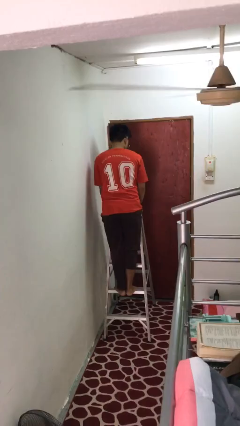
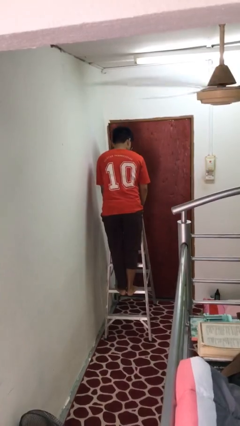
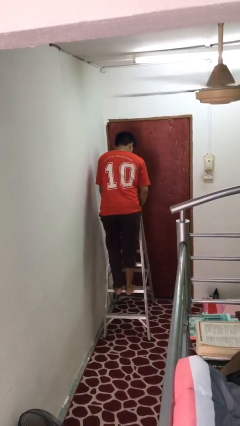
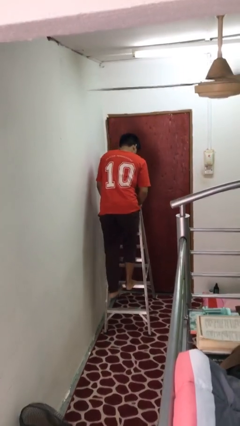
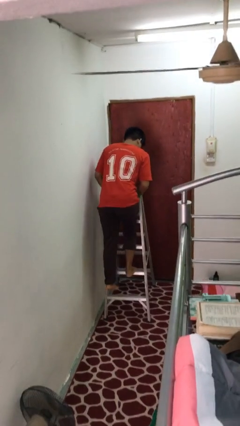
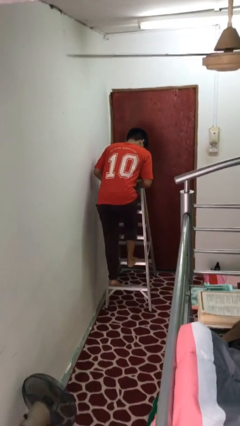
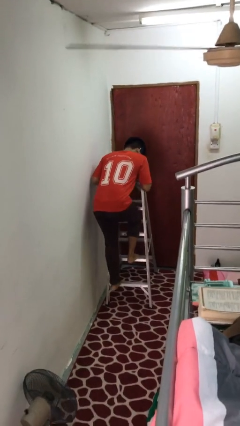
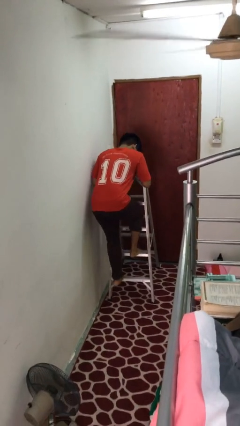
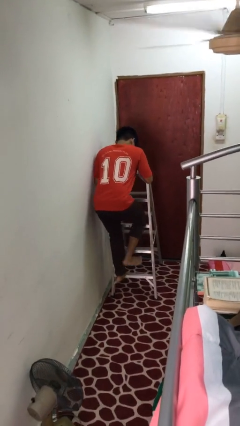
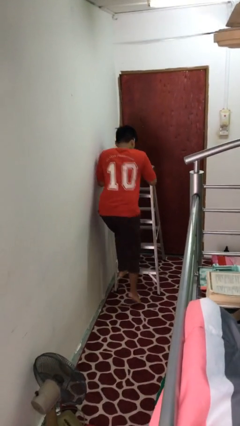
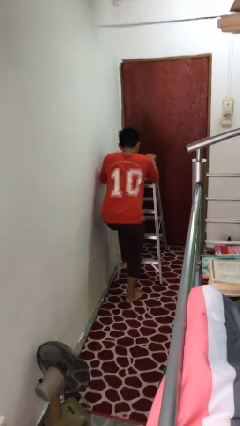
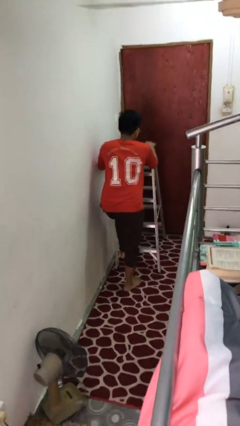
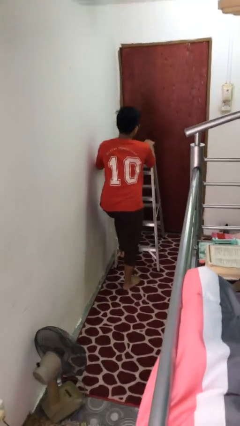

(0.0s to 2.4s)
person climbs down ladder

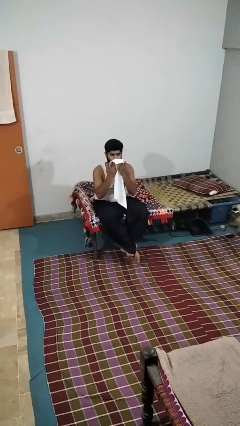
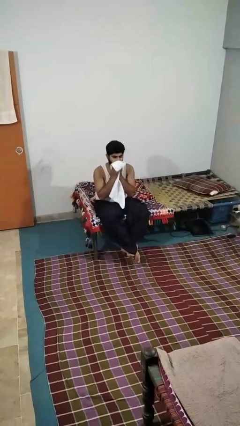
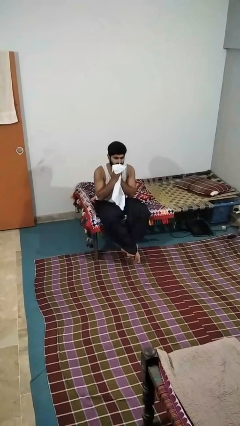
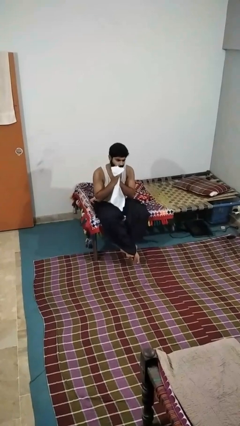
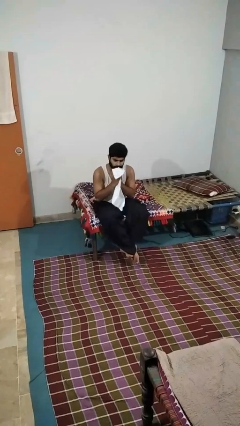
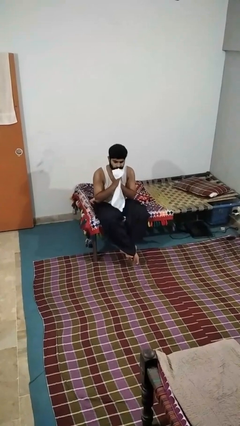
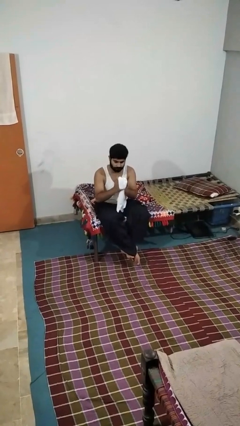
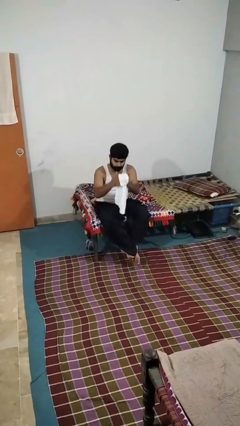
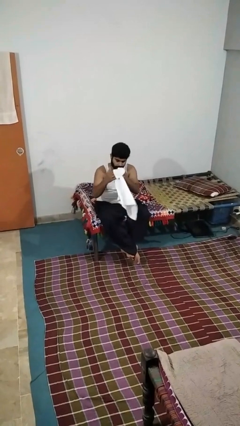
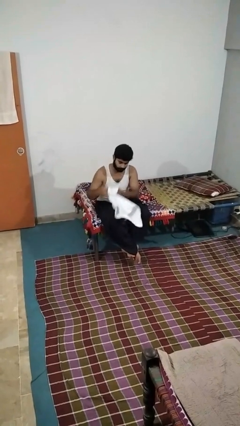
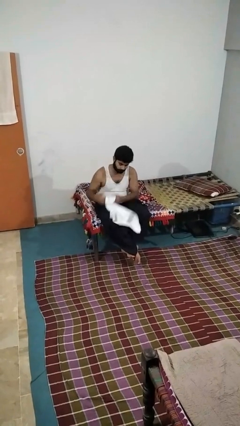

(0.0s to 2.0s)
person wipes mouth with napkin

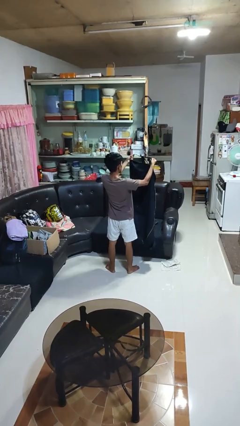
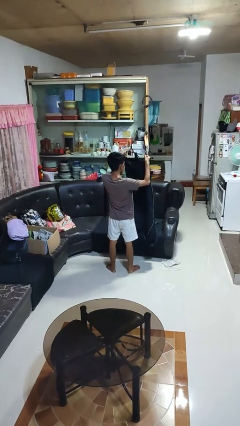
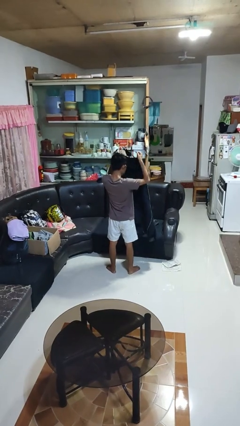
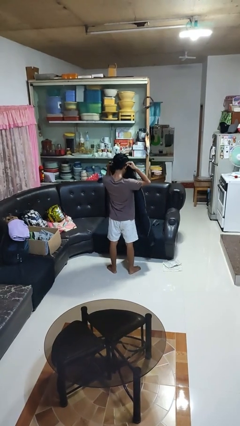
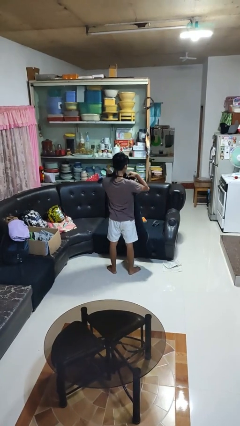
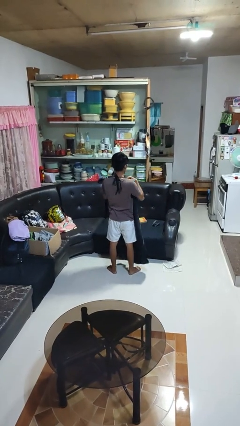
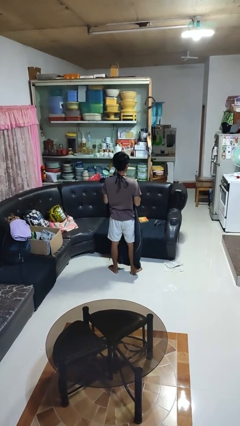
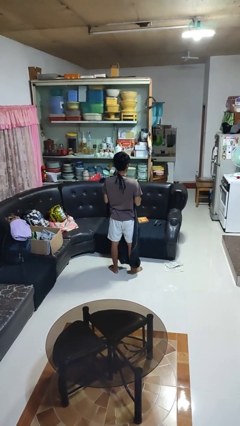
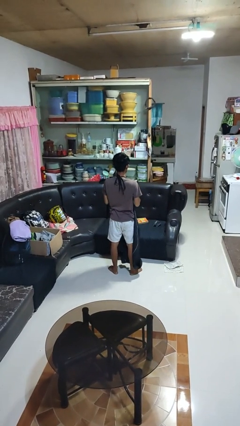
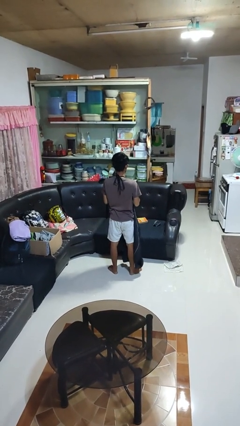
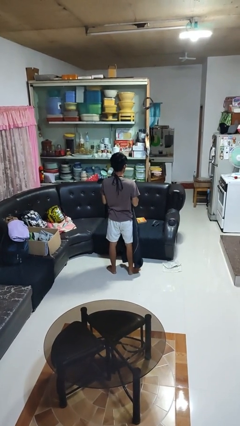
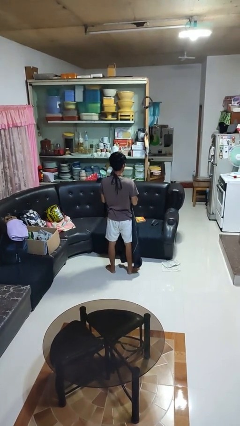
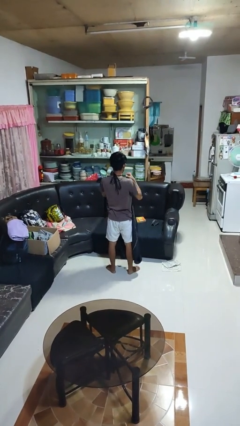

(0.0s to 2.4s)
person puts on apron

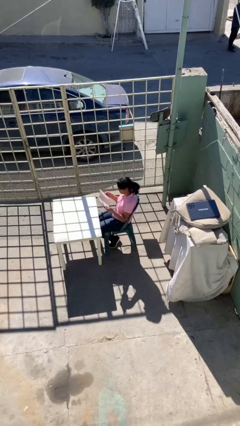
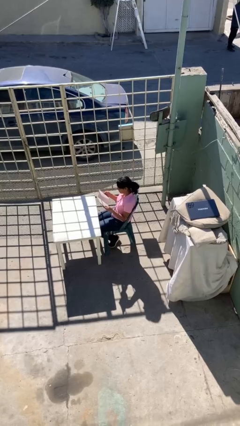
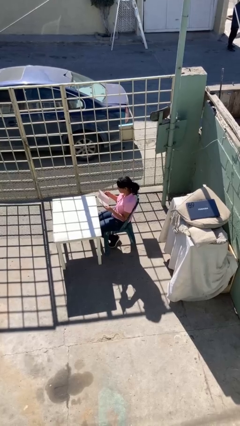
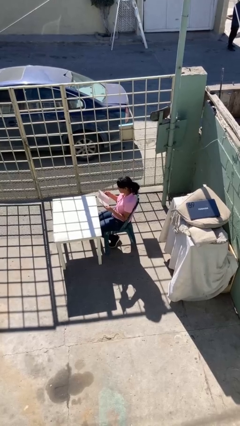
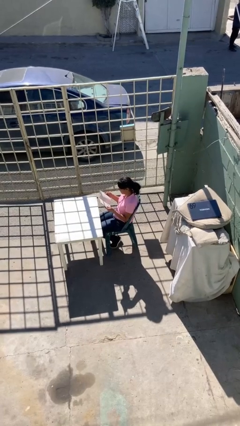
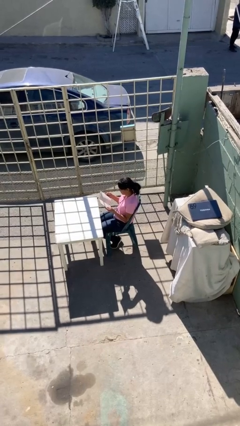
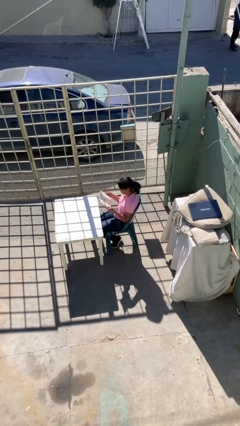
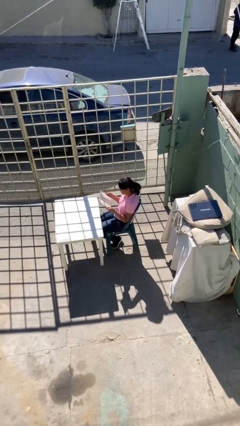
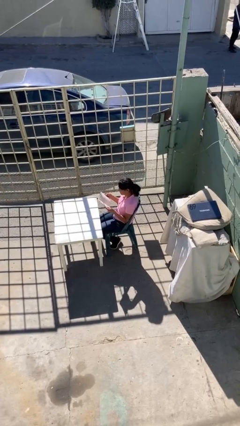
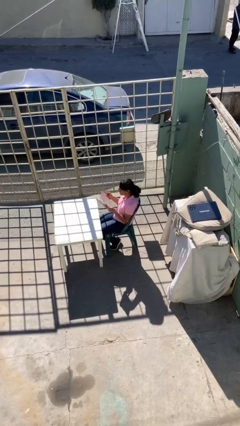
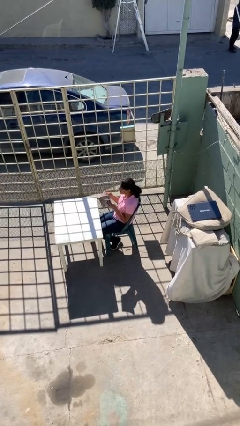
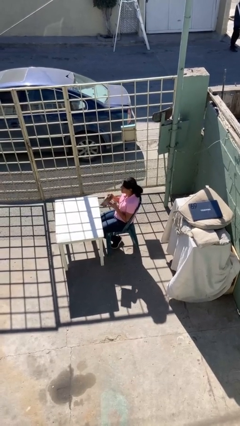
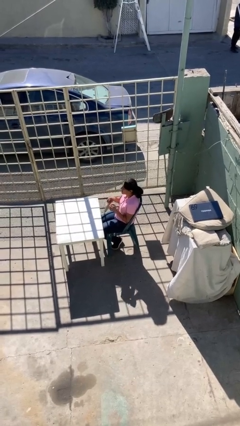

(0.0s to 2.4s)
person reads document

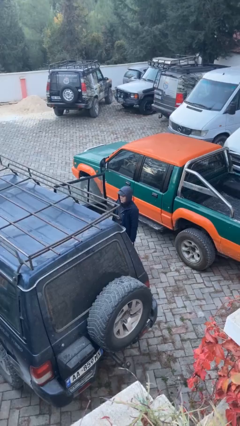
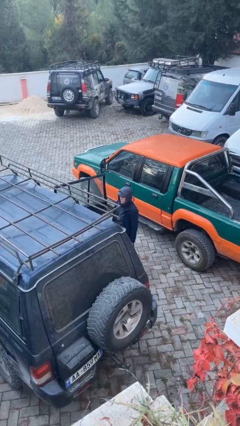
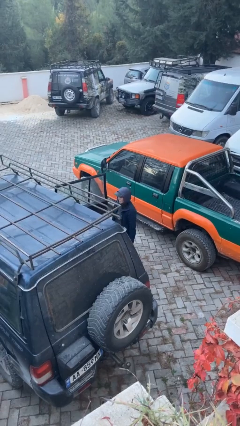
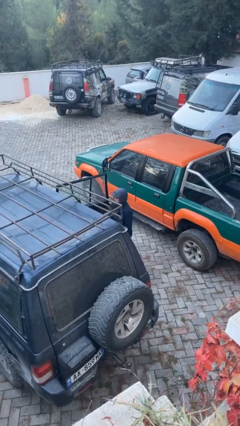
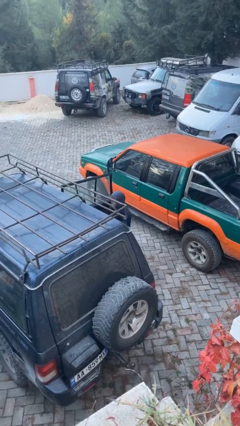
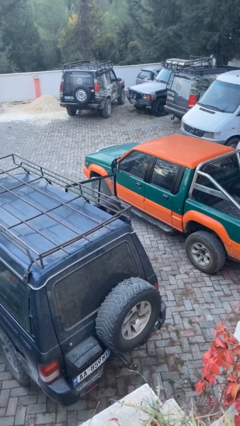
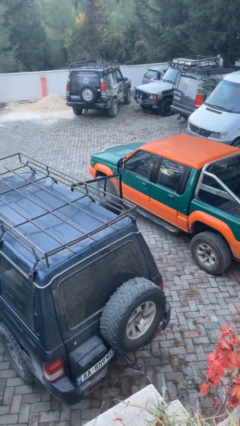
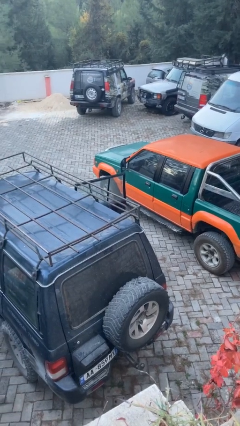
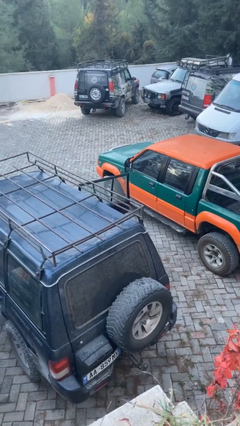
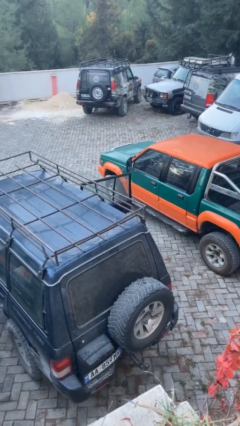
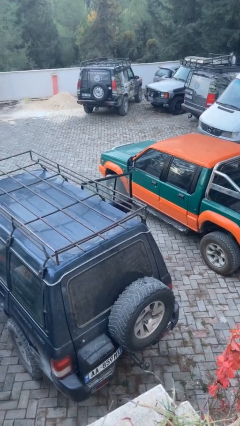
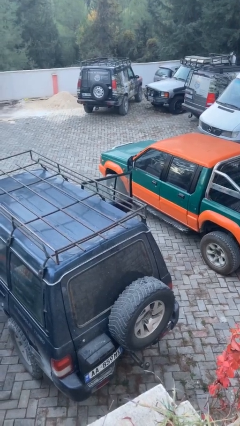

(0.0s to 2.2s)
person enters car

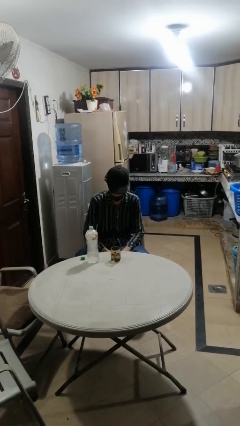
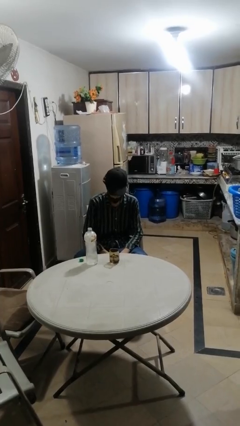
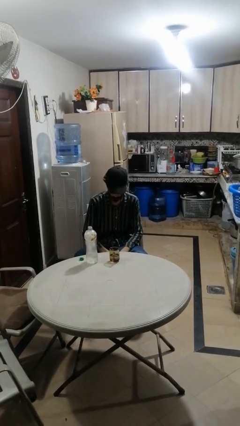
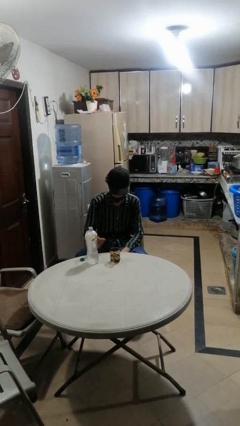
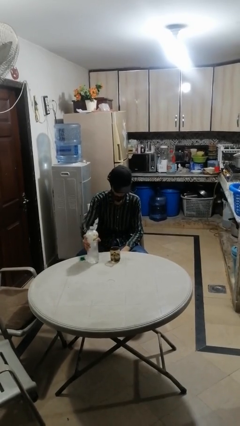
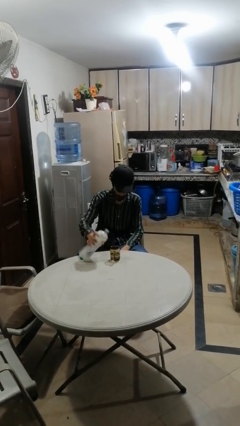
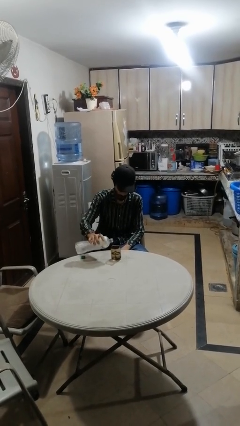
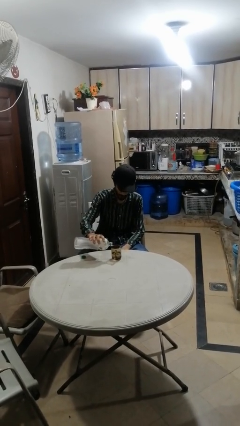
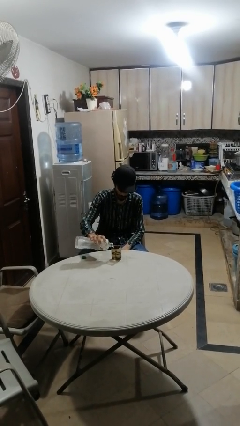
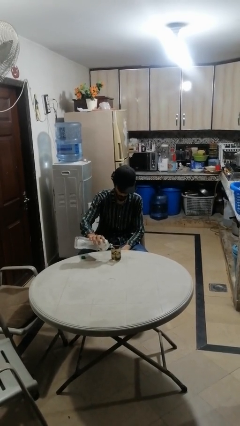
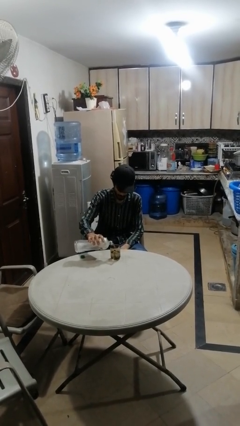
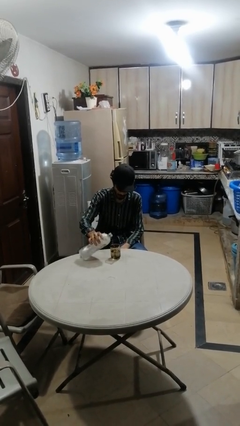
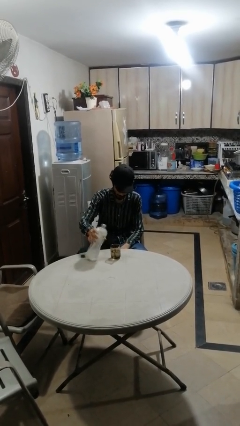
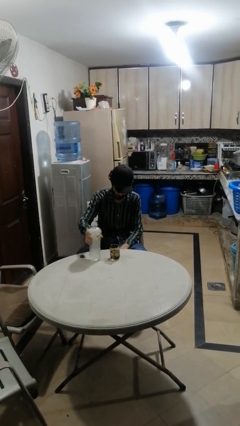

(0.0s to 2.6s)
person pours liquid into cup

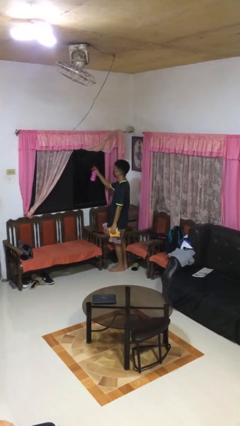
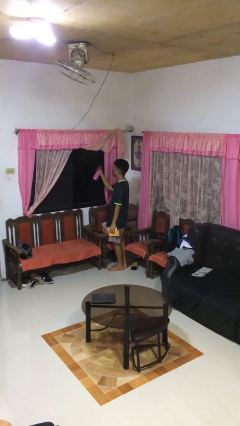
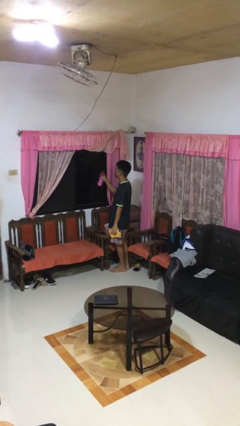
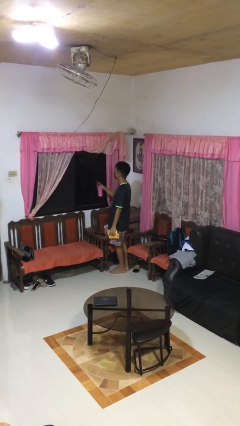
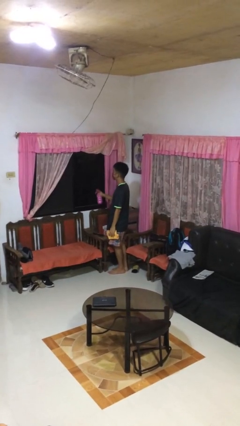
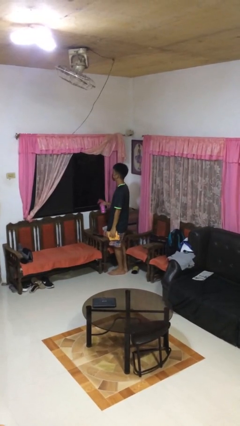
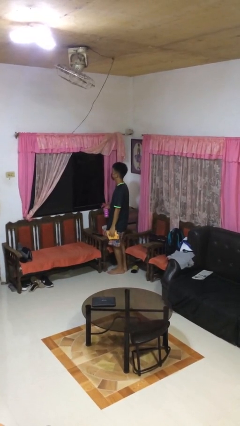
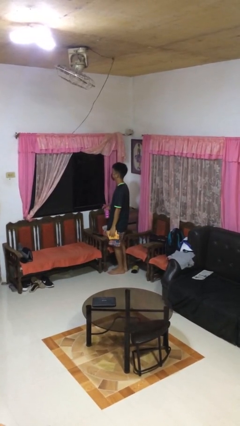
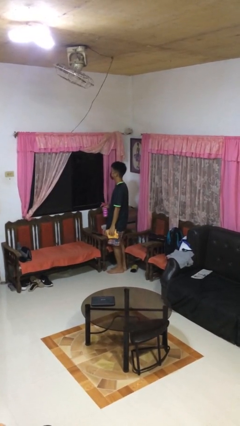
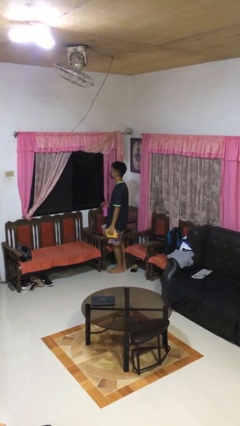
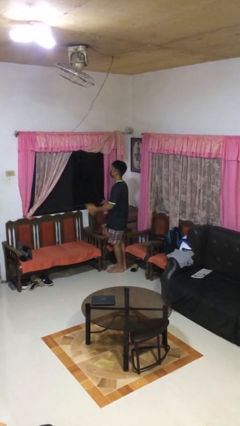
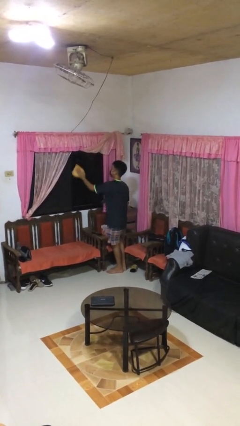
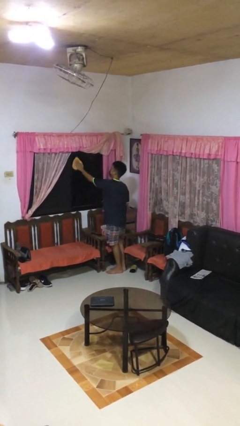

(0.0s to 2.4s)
person sprays from bottle

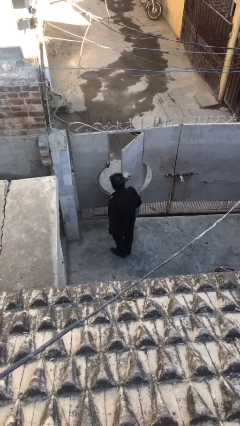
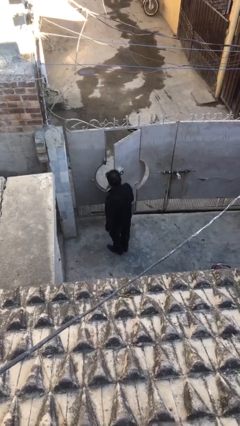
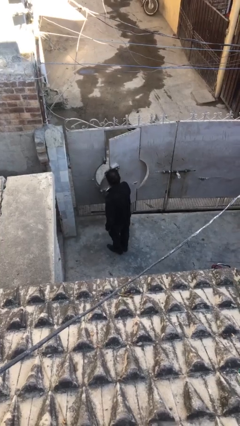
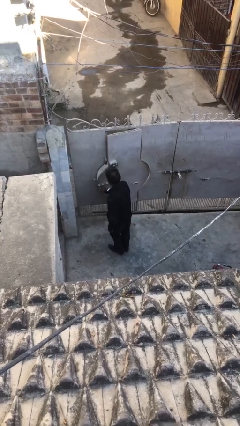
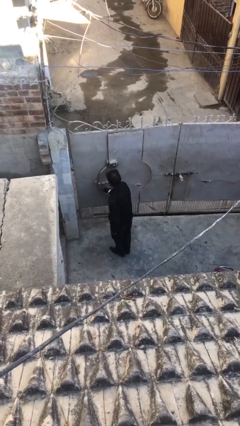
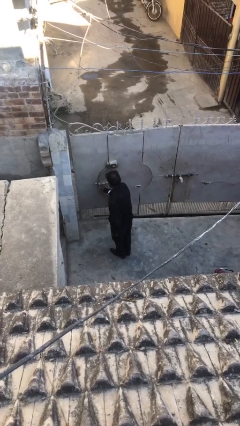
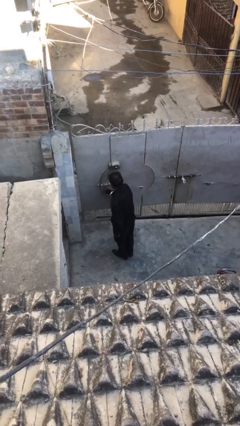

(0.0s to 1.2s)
person closes facility door
